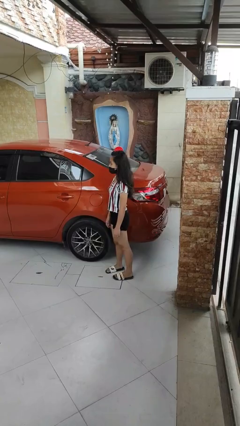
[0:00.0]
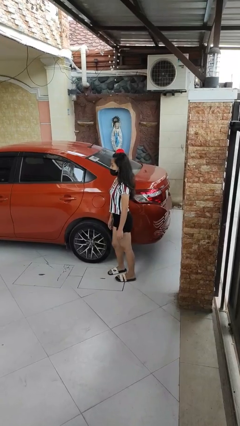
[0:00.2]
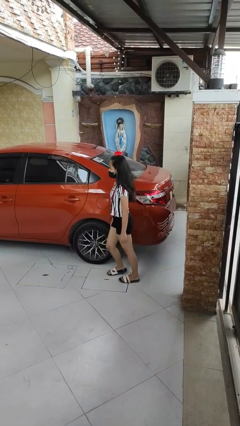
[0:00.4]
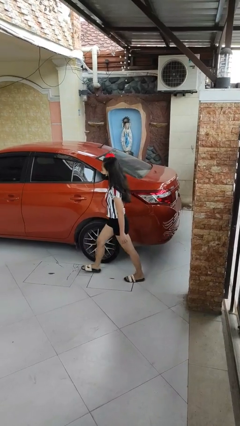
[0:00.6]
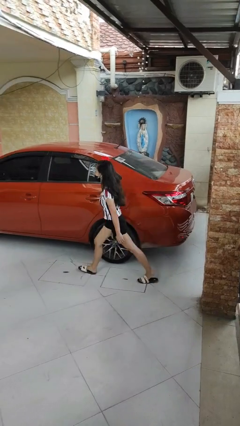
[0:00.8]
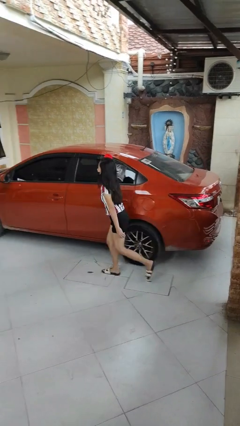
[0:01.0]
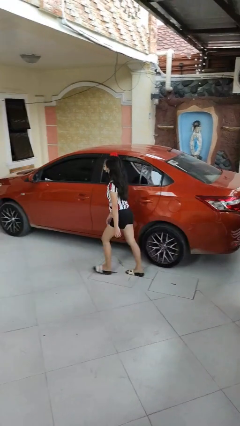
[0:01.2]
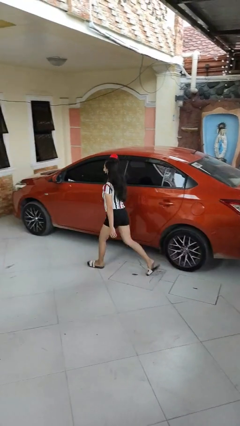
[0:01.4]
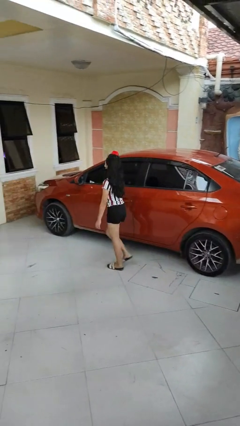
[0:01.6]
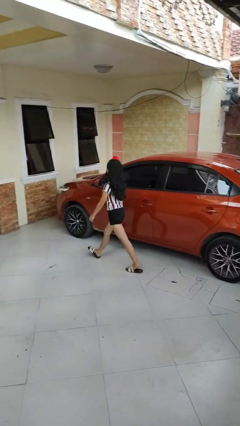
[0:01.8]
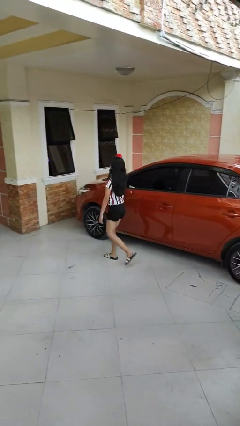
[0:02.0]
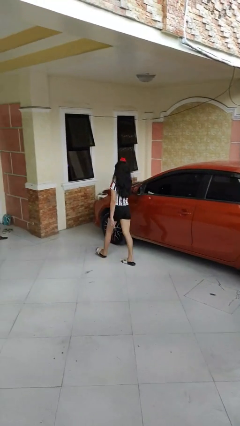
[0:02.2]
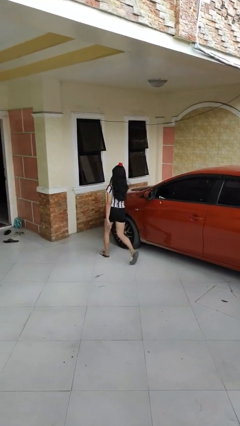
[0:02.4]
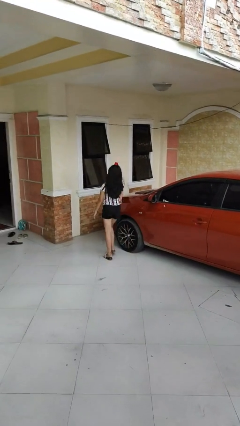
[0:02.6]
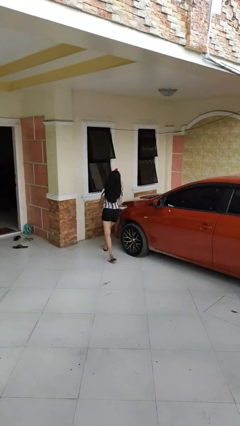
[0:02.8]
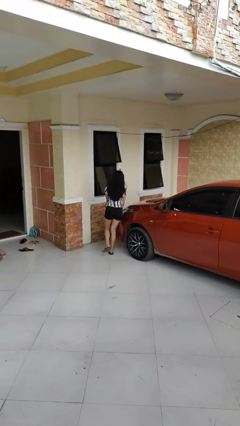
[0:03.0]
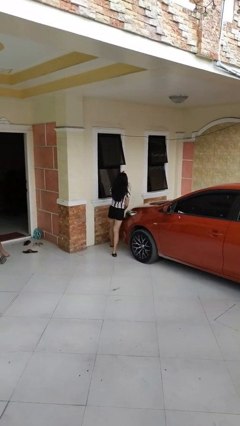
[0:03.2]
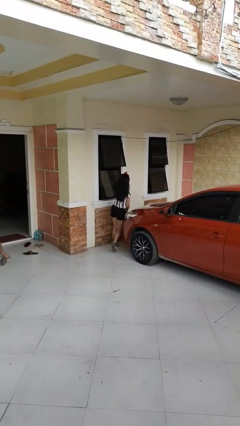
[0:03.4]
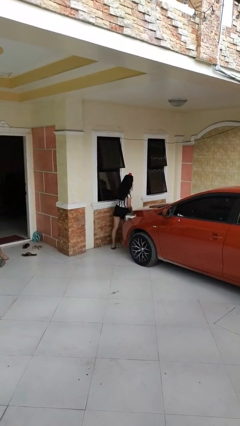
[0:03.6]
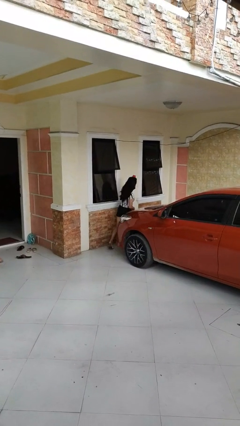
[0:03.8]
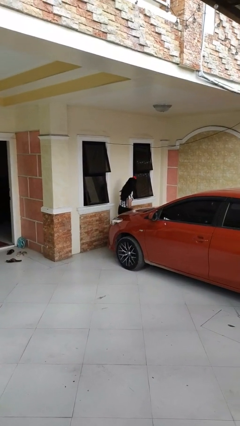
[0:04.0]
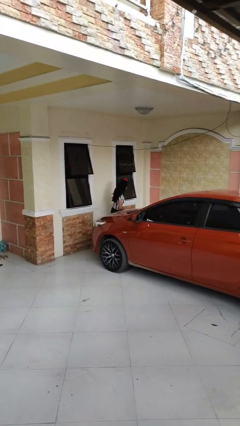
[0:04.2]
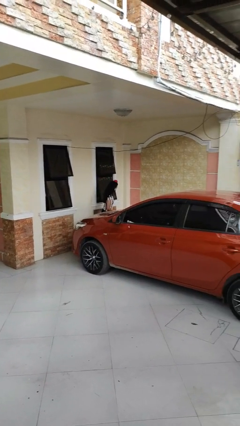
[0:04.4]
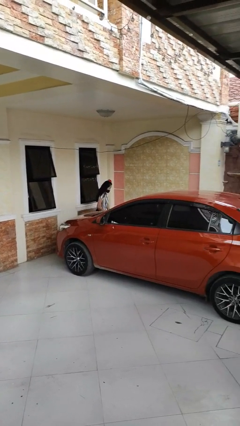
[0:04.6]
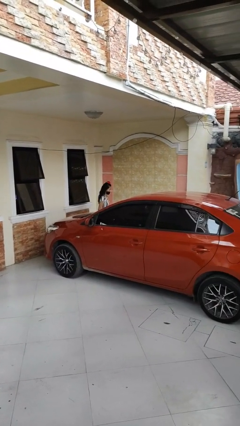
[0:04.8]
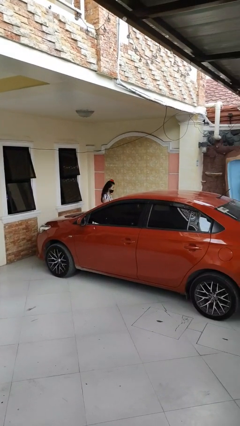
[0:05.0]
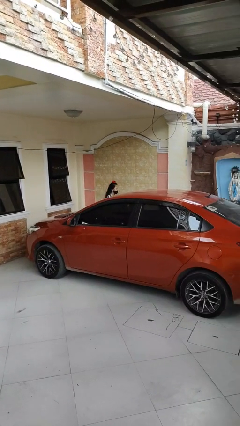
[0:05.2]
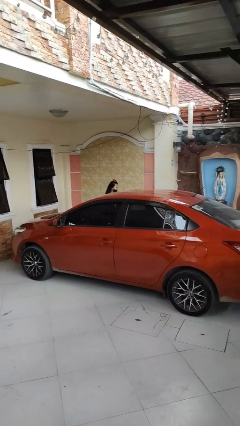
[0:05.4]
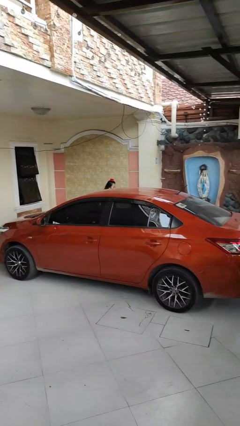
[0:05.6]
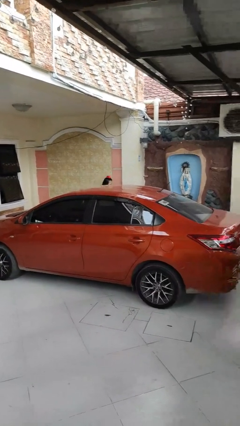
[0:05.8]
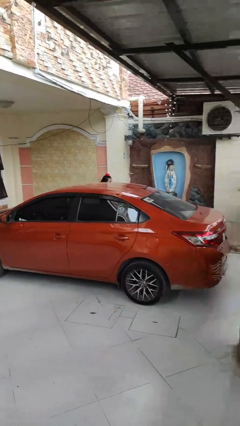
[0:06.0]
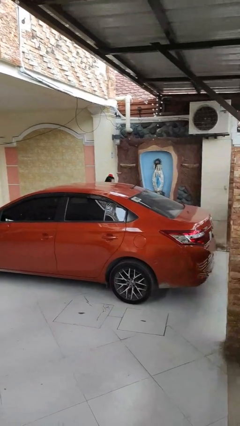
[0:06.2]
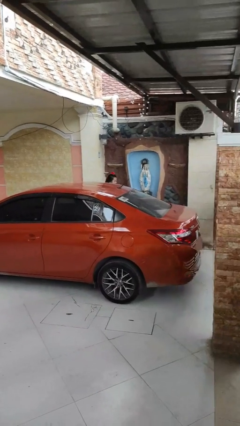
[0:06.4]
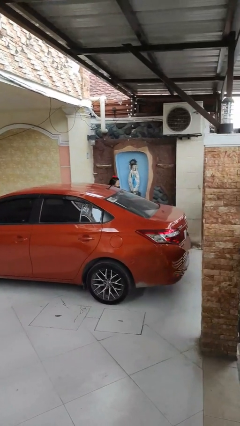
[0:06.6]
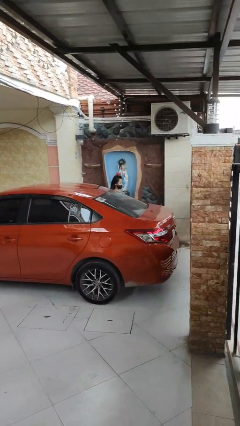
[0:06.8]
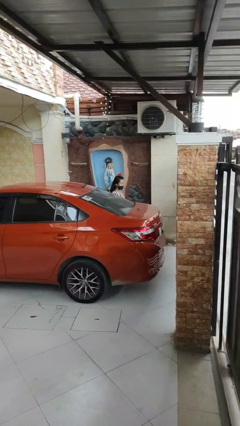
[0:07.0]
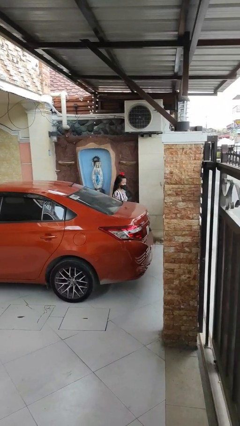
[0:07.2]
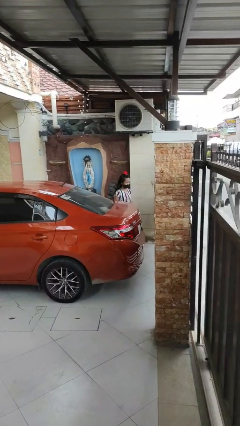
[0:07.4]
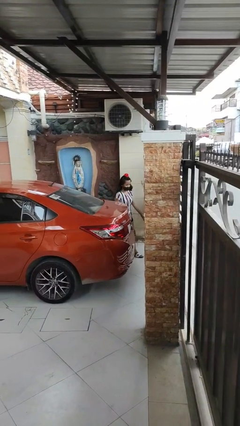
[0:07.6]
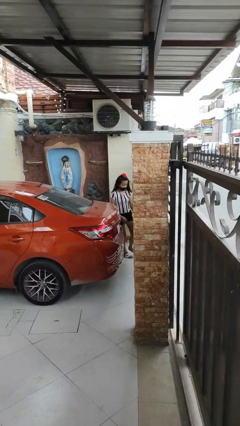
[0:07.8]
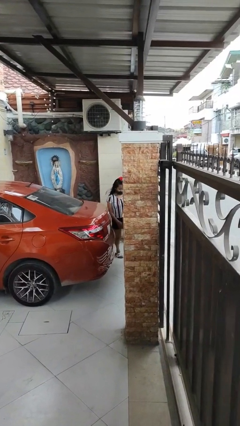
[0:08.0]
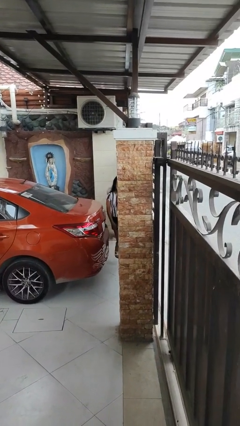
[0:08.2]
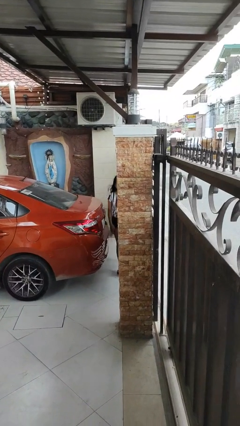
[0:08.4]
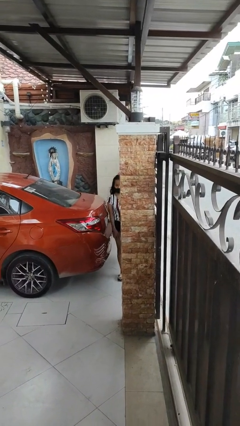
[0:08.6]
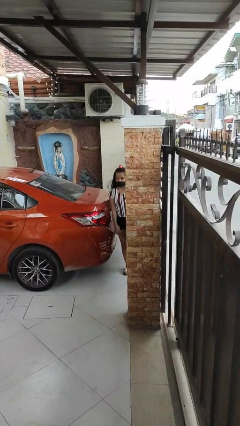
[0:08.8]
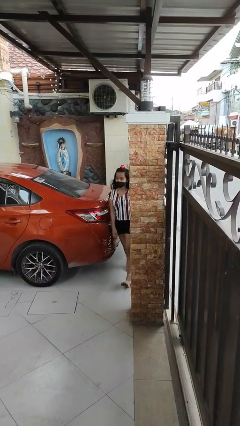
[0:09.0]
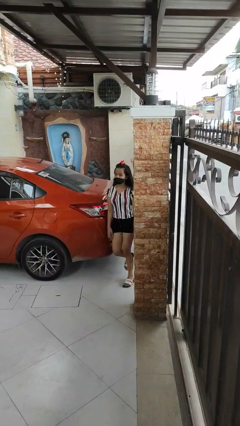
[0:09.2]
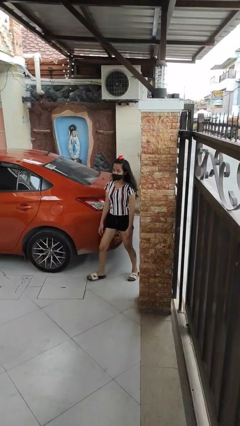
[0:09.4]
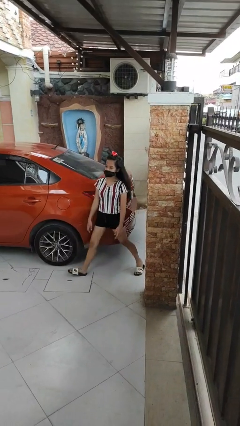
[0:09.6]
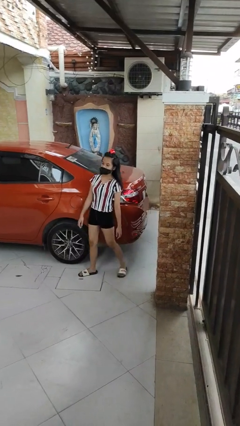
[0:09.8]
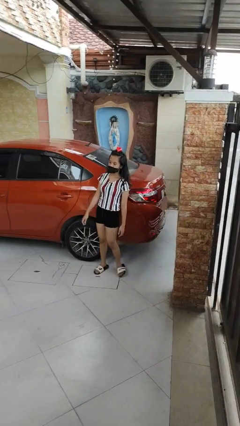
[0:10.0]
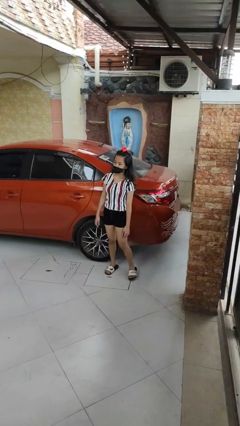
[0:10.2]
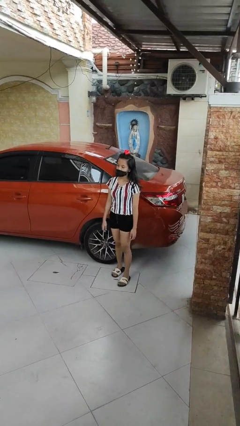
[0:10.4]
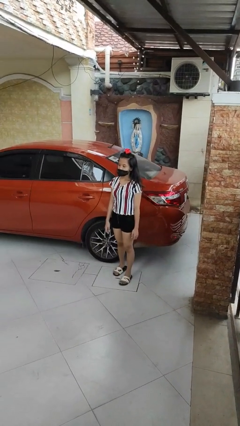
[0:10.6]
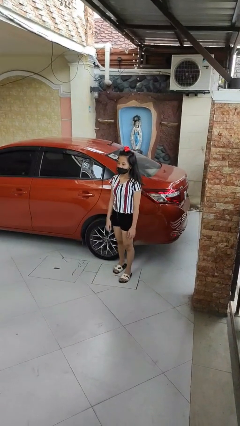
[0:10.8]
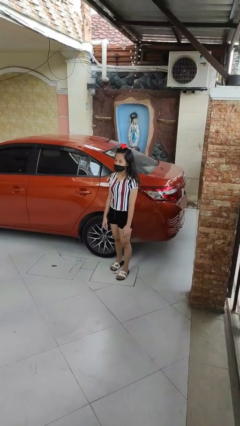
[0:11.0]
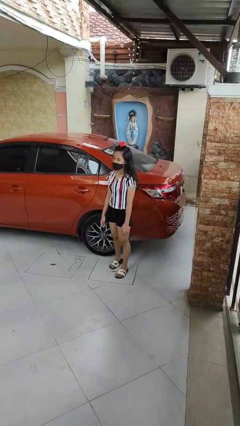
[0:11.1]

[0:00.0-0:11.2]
person walks around car

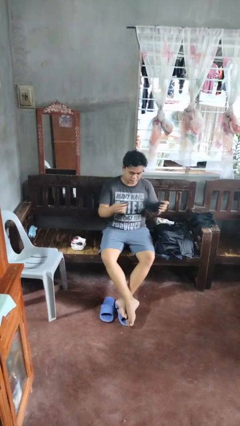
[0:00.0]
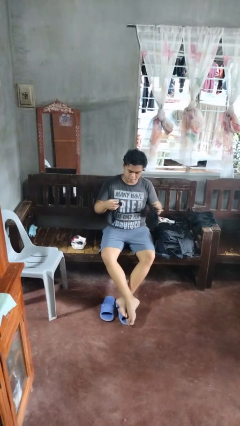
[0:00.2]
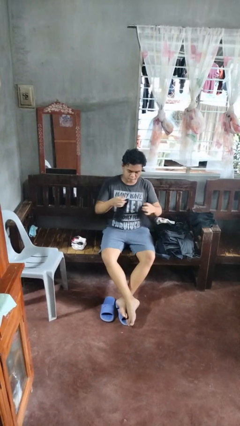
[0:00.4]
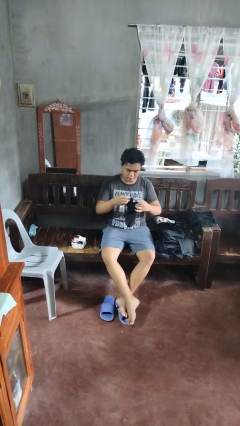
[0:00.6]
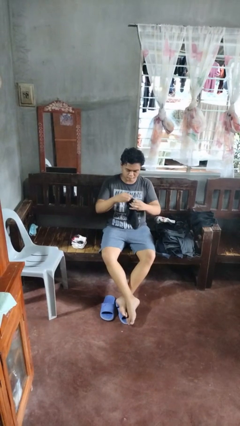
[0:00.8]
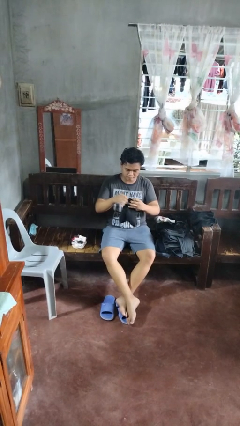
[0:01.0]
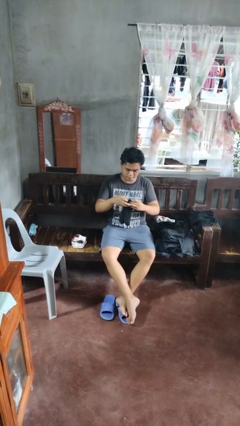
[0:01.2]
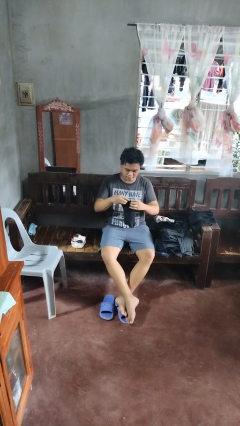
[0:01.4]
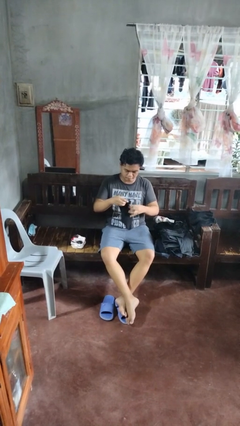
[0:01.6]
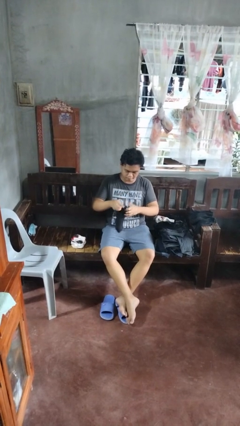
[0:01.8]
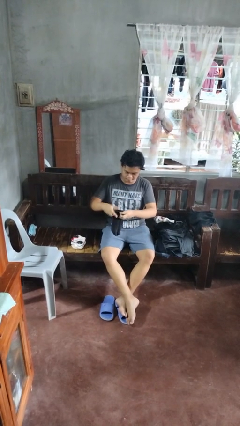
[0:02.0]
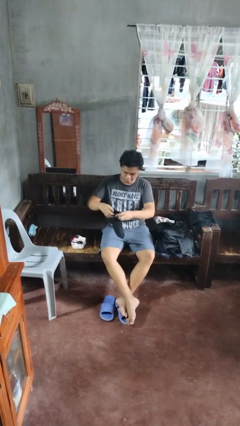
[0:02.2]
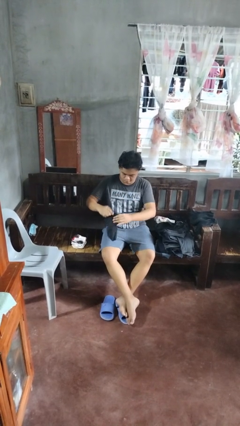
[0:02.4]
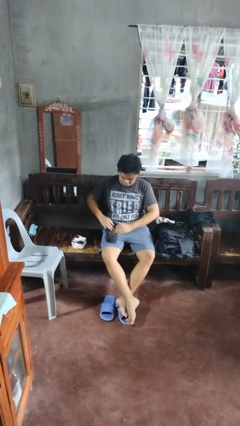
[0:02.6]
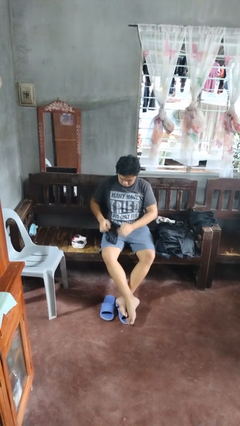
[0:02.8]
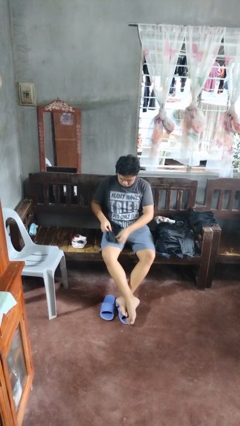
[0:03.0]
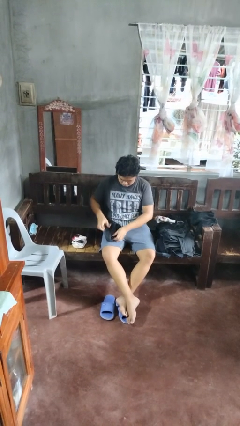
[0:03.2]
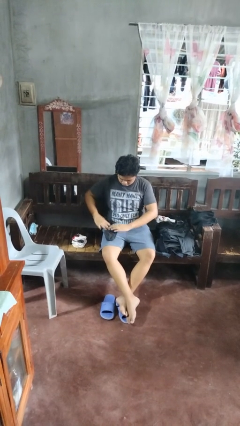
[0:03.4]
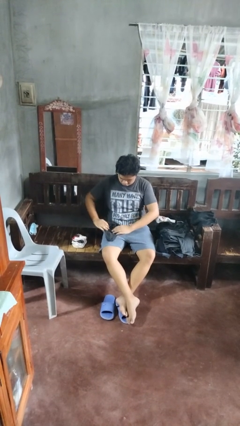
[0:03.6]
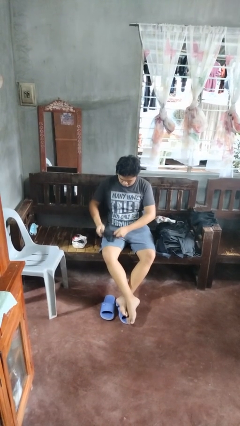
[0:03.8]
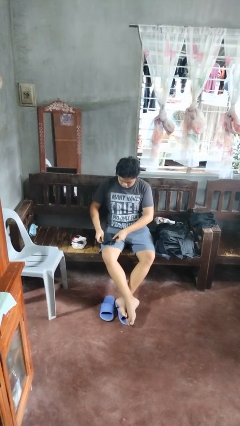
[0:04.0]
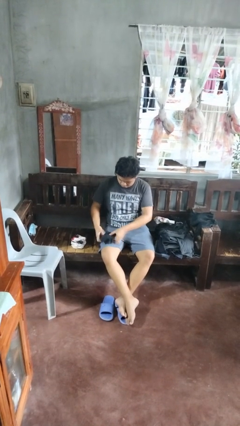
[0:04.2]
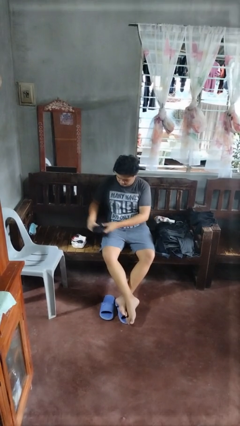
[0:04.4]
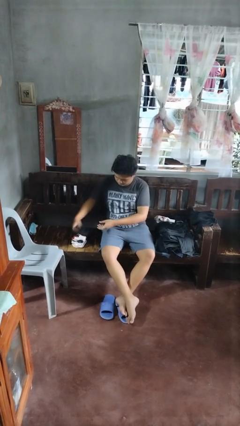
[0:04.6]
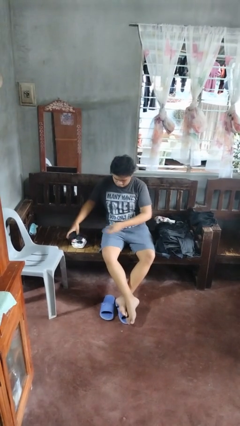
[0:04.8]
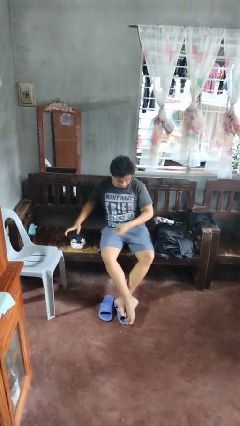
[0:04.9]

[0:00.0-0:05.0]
person folds socks

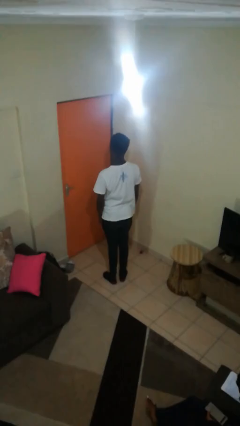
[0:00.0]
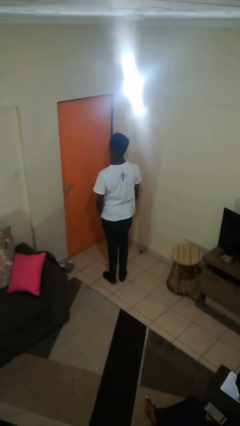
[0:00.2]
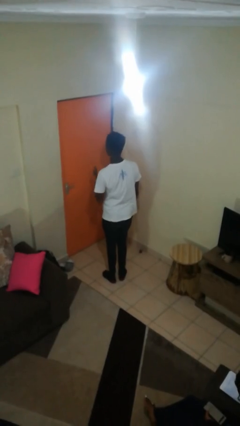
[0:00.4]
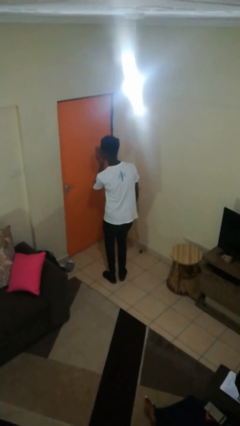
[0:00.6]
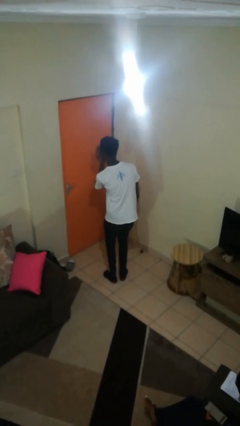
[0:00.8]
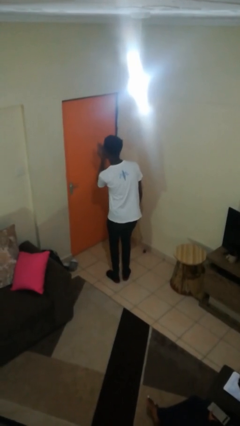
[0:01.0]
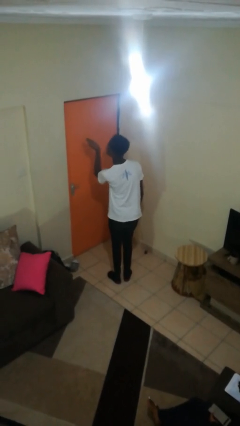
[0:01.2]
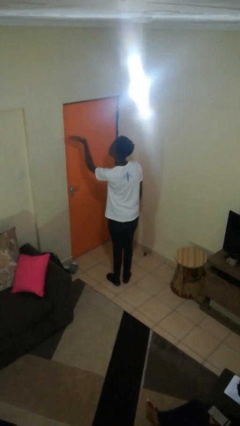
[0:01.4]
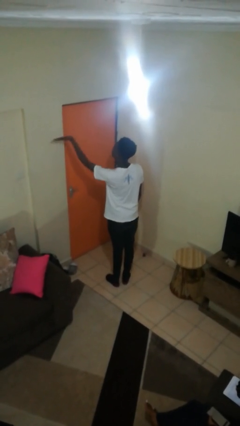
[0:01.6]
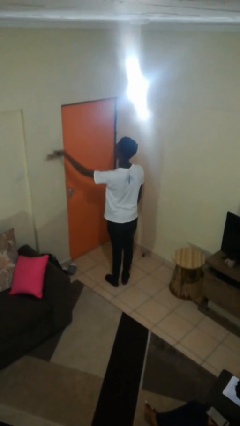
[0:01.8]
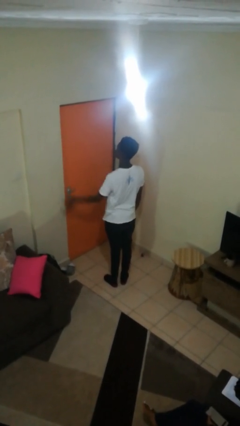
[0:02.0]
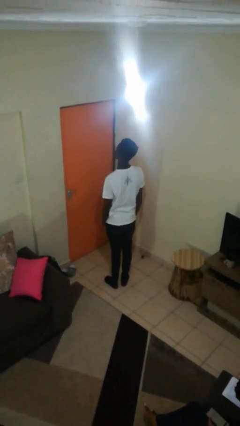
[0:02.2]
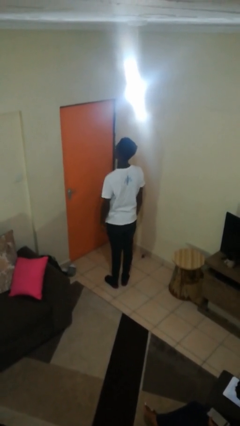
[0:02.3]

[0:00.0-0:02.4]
person gestures blow kiss
